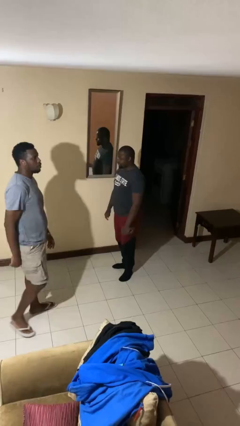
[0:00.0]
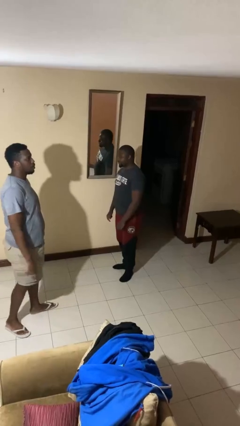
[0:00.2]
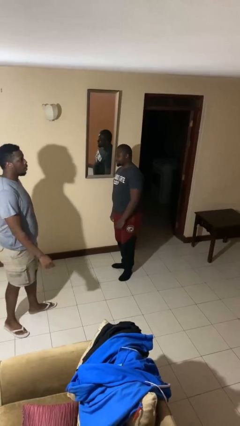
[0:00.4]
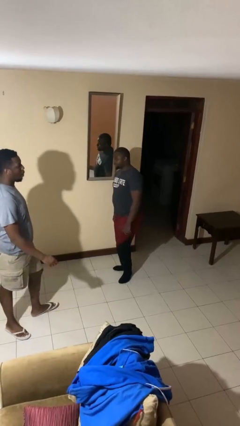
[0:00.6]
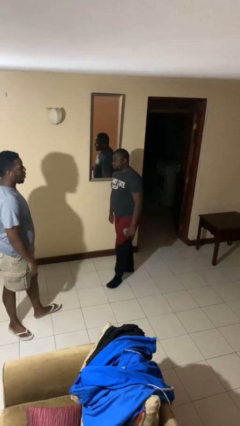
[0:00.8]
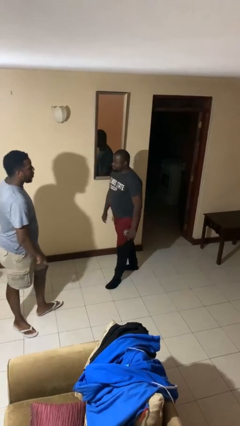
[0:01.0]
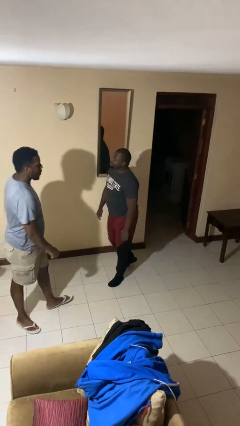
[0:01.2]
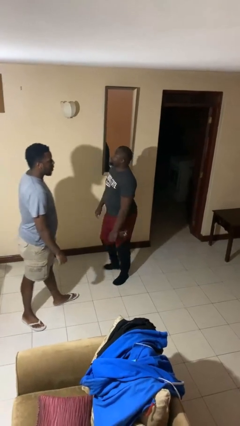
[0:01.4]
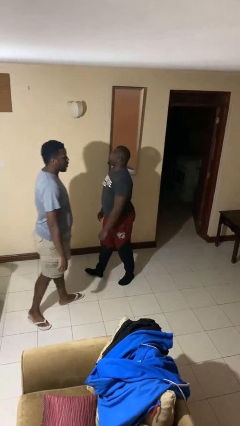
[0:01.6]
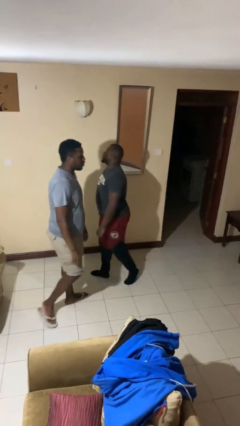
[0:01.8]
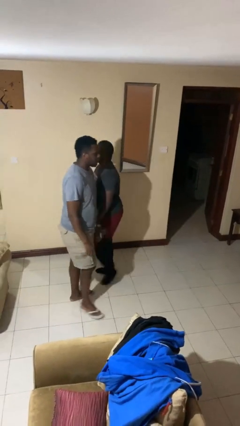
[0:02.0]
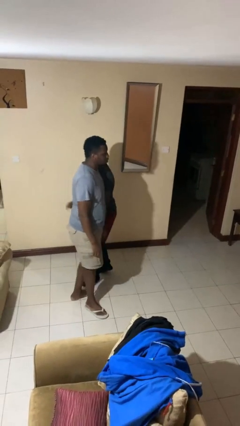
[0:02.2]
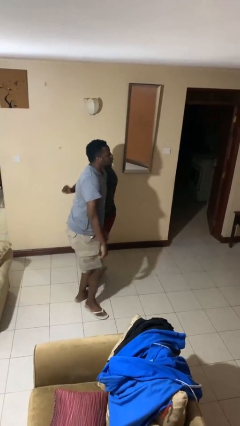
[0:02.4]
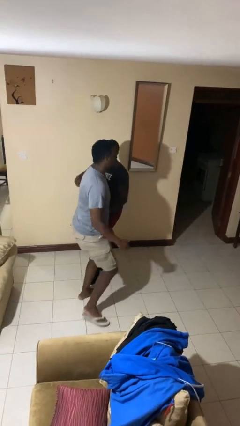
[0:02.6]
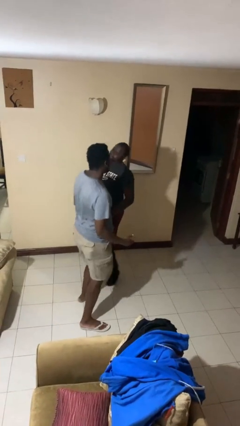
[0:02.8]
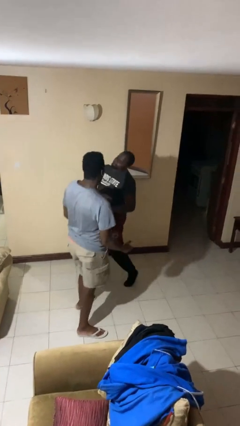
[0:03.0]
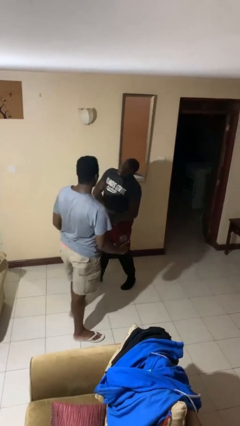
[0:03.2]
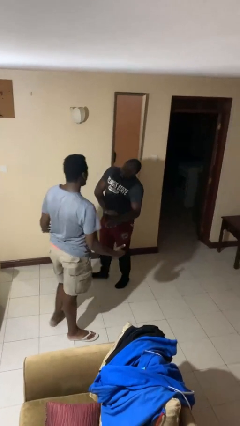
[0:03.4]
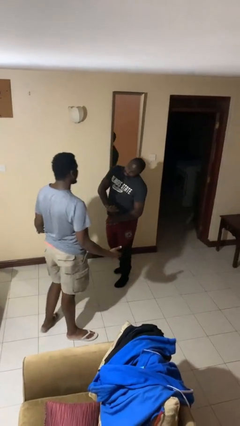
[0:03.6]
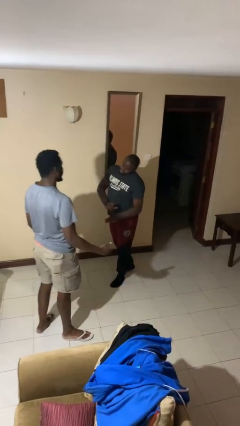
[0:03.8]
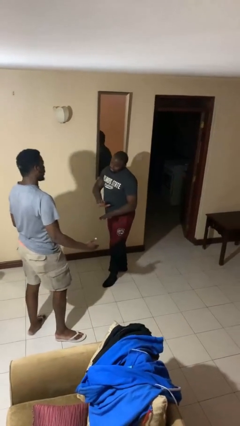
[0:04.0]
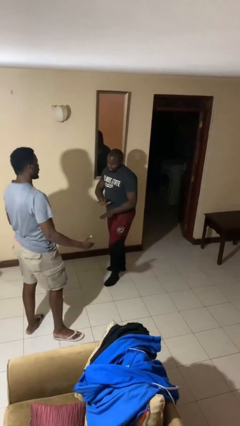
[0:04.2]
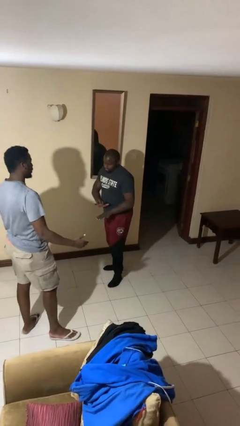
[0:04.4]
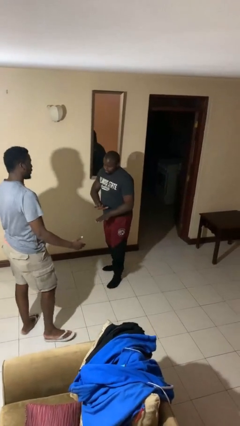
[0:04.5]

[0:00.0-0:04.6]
person bumps into person

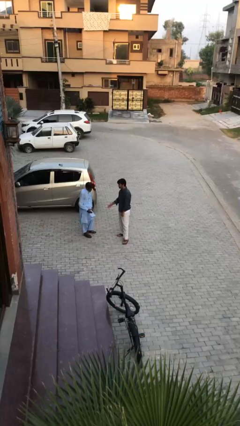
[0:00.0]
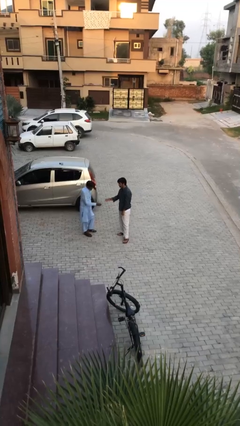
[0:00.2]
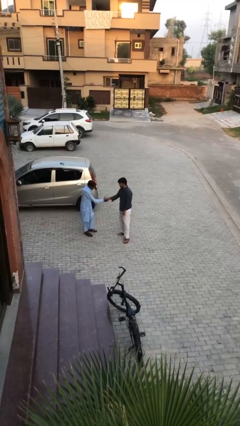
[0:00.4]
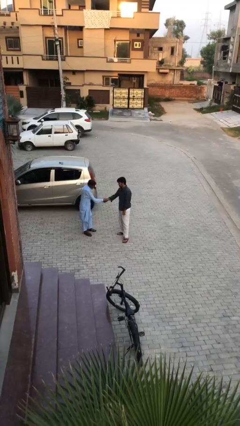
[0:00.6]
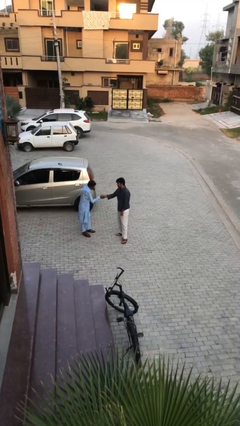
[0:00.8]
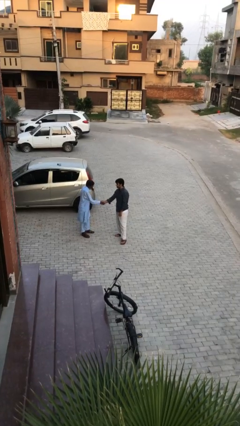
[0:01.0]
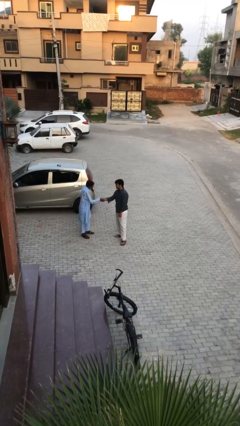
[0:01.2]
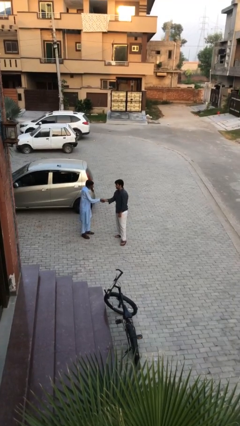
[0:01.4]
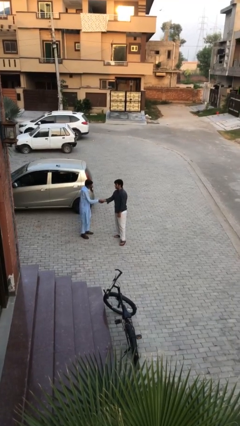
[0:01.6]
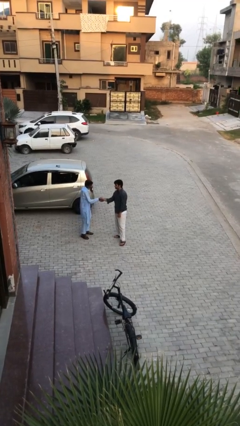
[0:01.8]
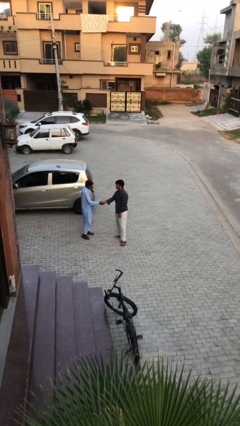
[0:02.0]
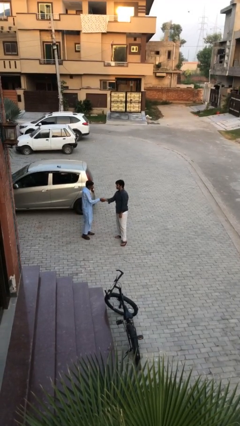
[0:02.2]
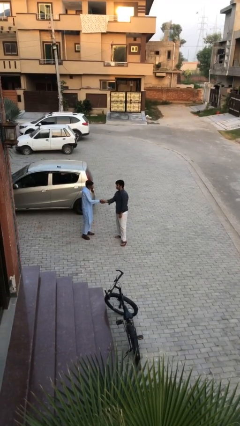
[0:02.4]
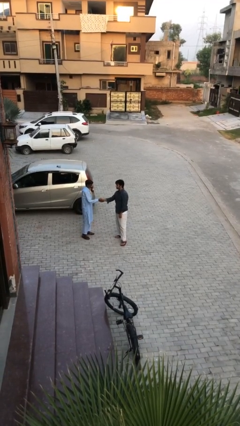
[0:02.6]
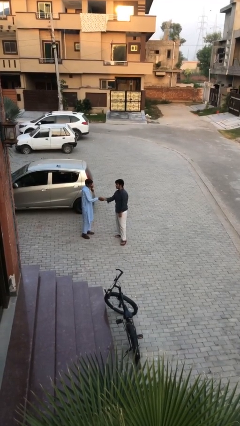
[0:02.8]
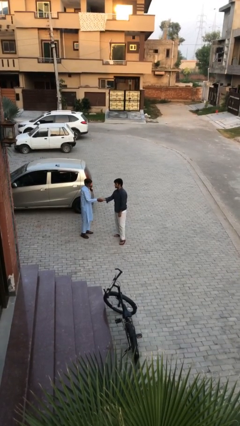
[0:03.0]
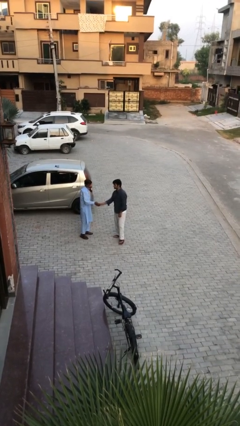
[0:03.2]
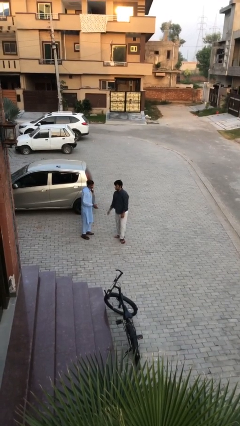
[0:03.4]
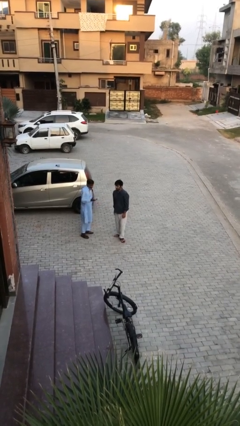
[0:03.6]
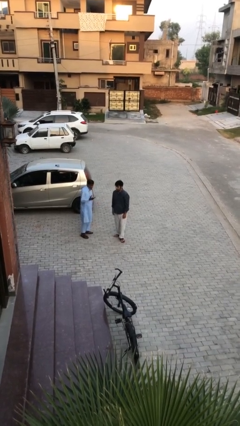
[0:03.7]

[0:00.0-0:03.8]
person shakes hand

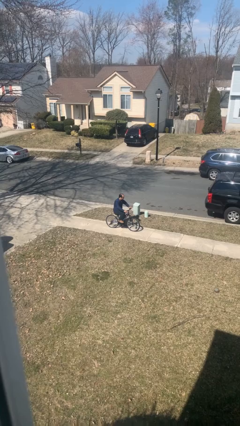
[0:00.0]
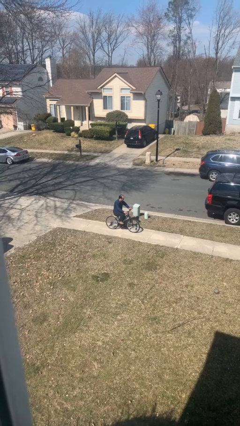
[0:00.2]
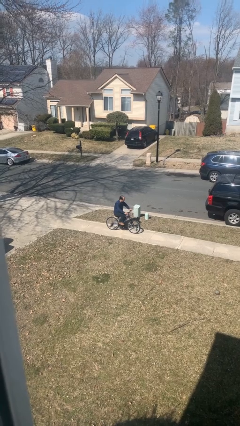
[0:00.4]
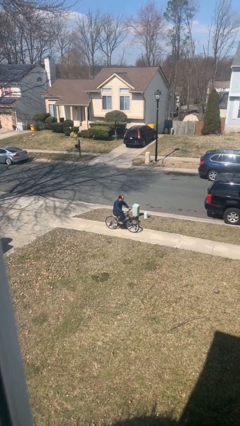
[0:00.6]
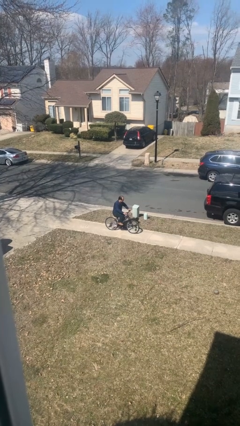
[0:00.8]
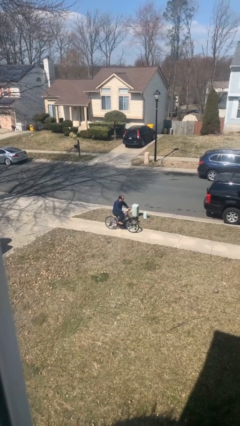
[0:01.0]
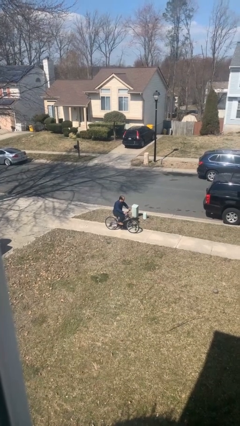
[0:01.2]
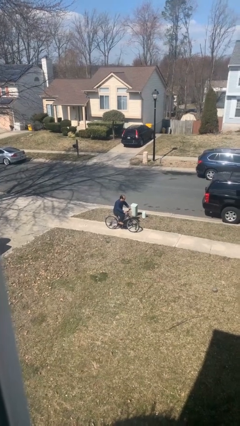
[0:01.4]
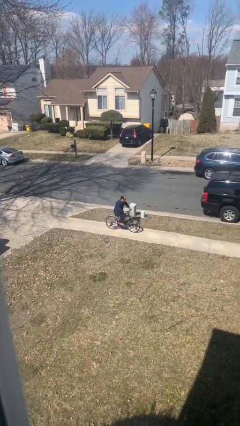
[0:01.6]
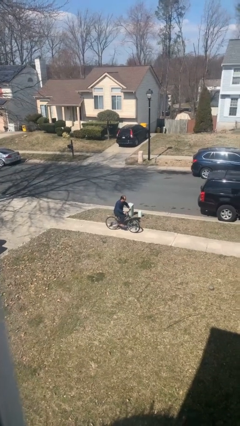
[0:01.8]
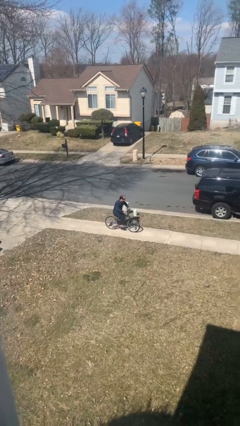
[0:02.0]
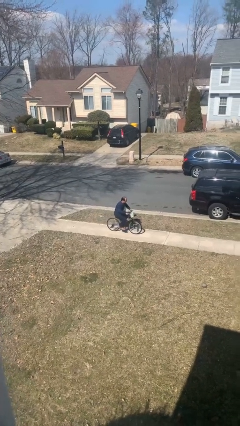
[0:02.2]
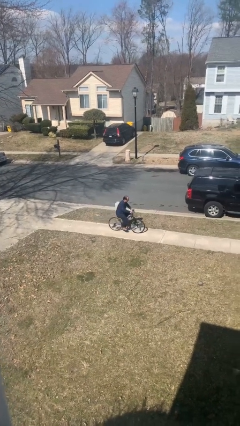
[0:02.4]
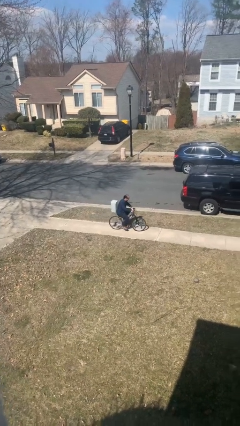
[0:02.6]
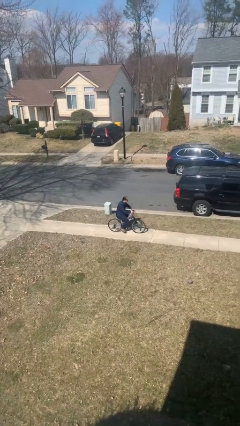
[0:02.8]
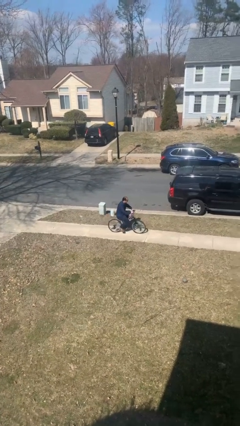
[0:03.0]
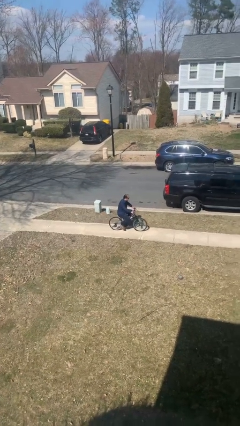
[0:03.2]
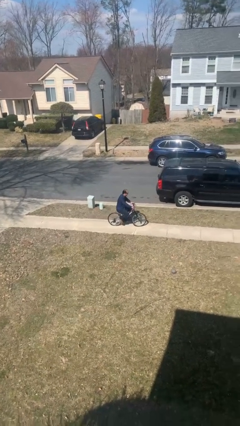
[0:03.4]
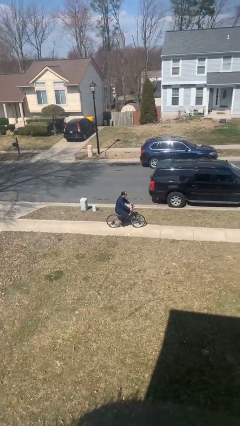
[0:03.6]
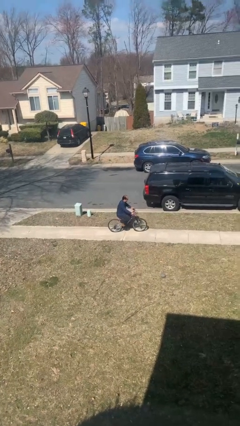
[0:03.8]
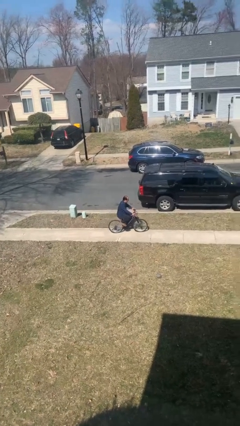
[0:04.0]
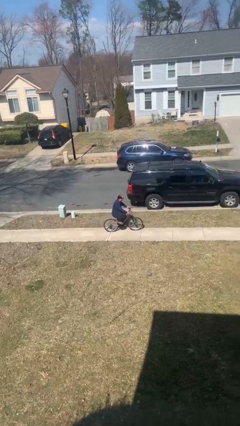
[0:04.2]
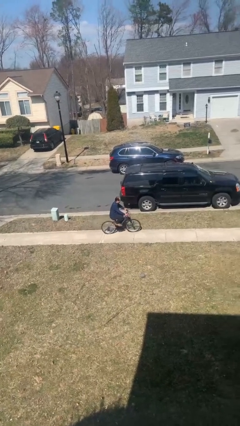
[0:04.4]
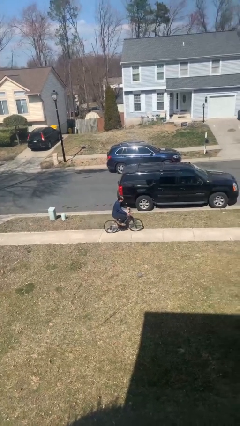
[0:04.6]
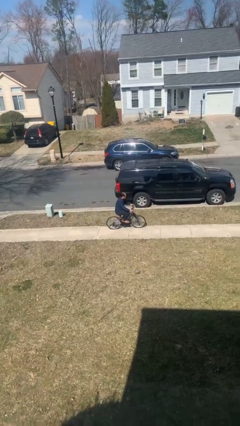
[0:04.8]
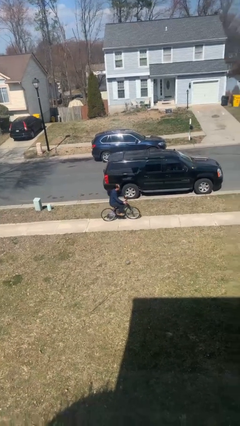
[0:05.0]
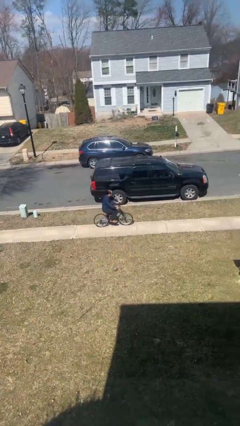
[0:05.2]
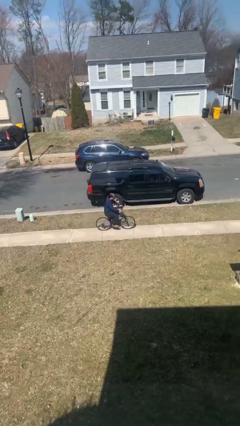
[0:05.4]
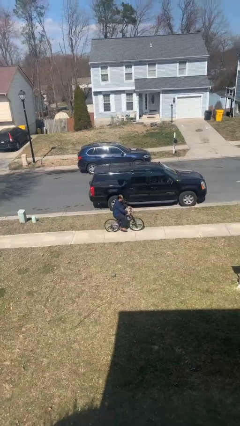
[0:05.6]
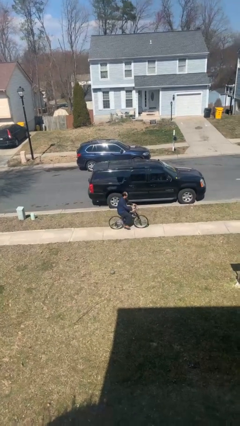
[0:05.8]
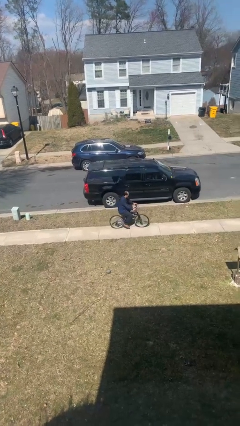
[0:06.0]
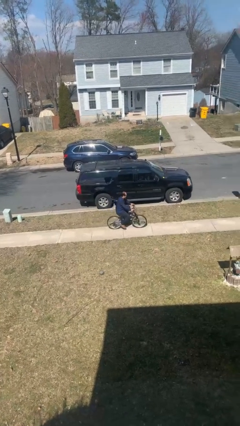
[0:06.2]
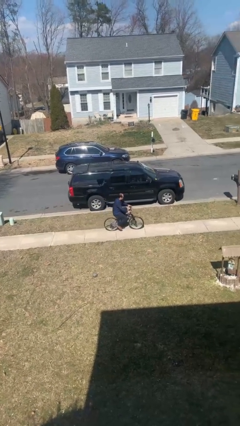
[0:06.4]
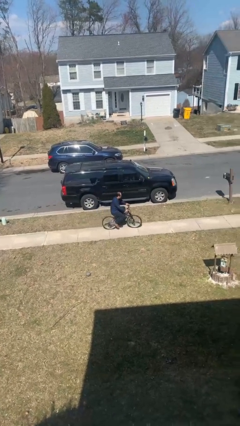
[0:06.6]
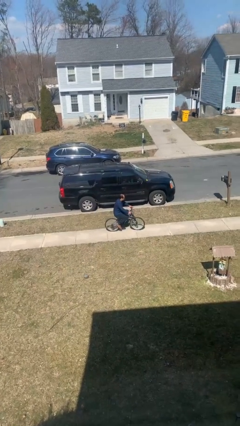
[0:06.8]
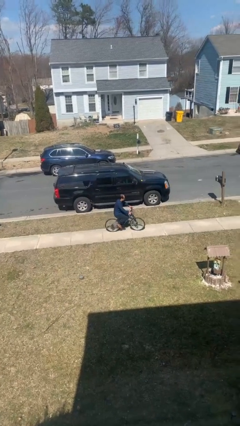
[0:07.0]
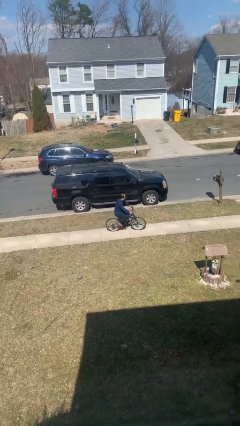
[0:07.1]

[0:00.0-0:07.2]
person rides bicycle

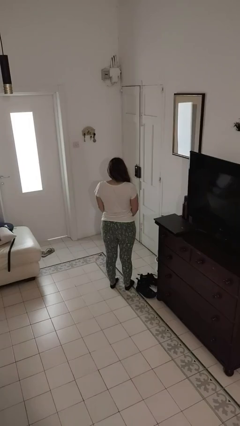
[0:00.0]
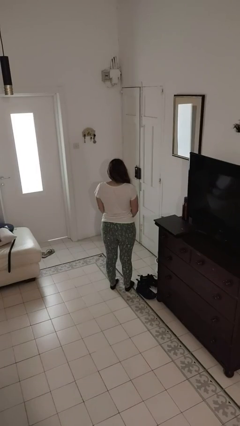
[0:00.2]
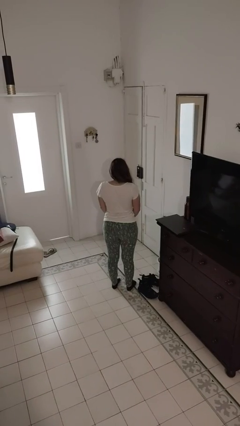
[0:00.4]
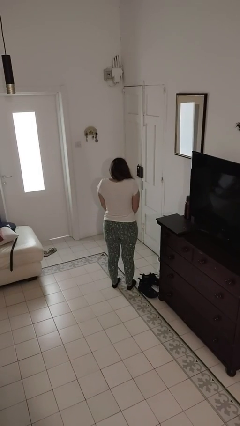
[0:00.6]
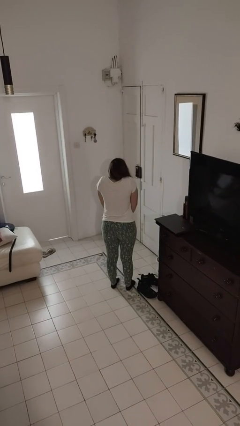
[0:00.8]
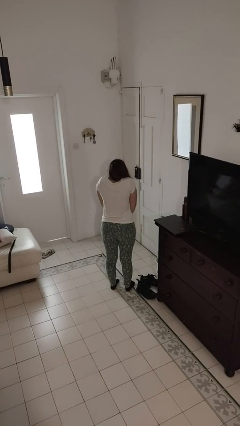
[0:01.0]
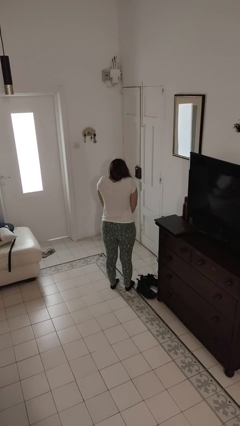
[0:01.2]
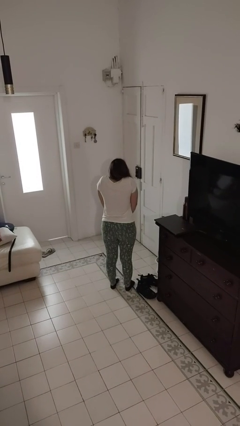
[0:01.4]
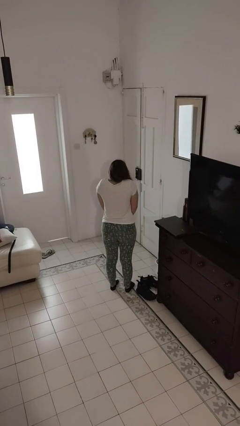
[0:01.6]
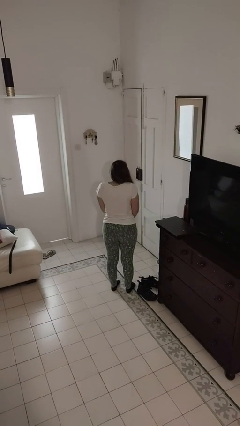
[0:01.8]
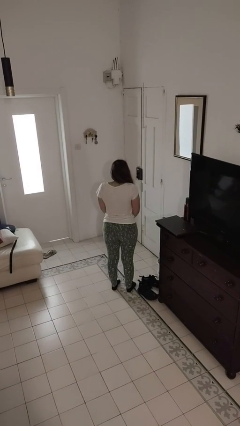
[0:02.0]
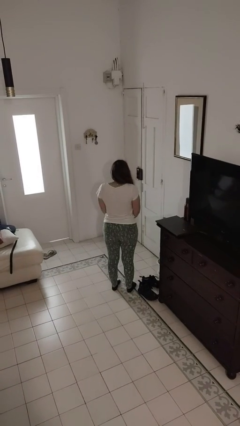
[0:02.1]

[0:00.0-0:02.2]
person shrugs
